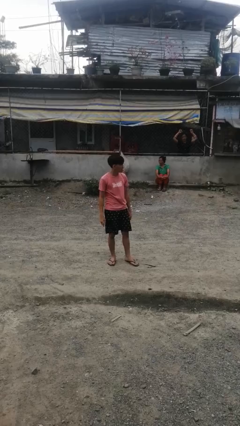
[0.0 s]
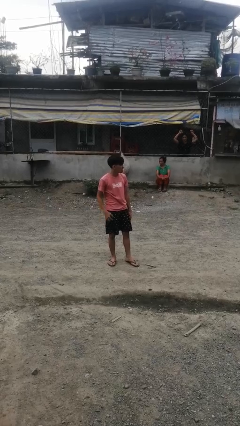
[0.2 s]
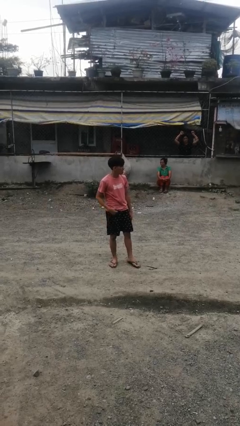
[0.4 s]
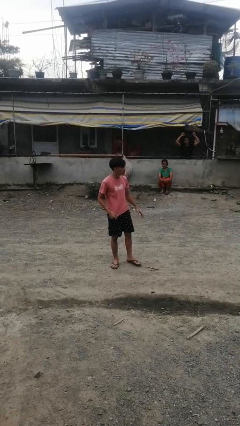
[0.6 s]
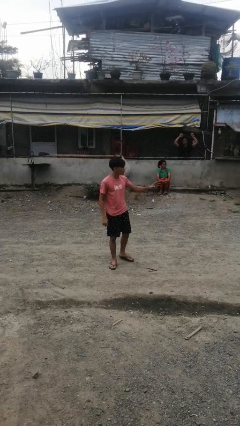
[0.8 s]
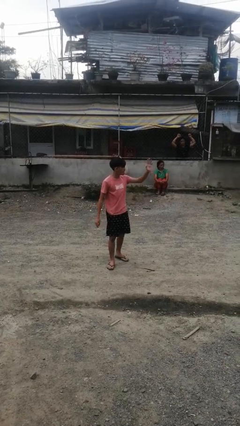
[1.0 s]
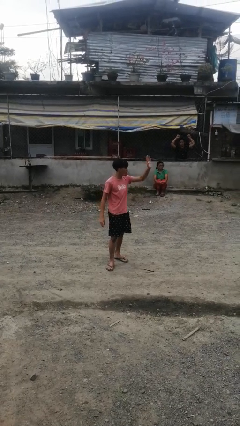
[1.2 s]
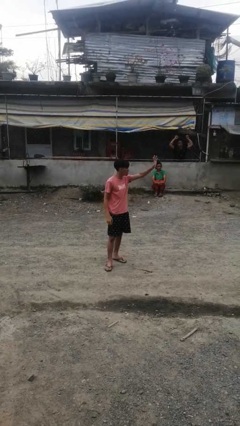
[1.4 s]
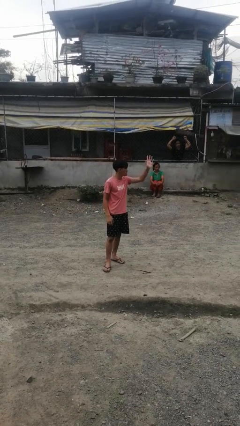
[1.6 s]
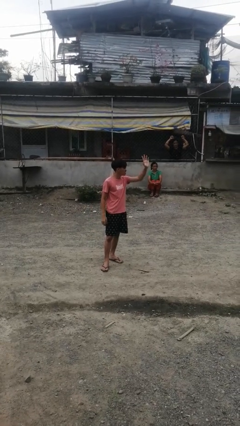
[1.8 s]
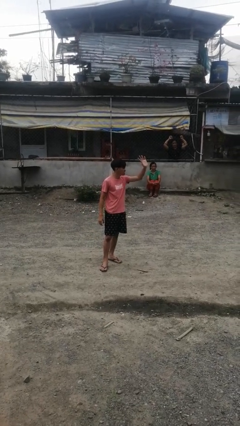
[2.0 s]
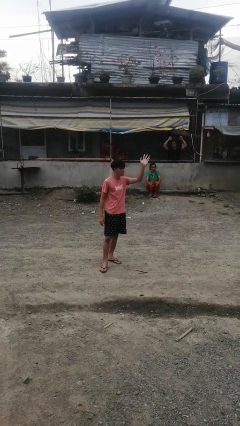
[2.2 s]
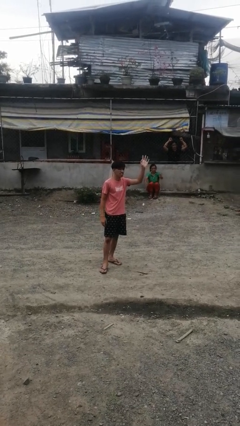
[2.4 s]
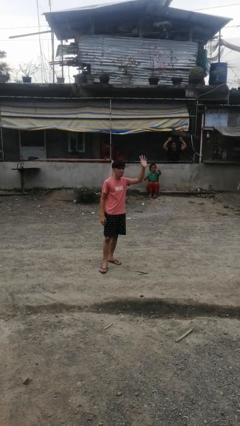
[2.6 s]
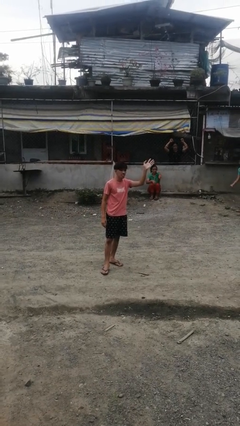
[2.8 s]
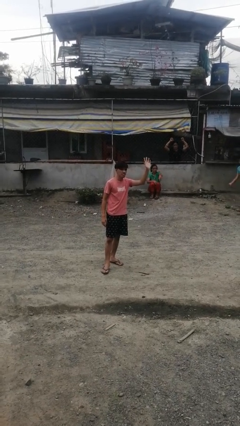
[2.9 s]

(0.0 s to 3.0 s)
person waves at person

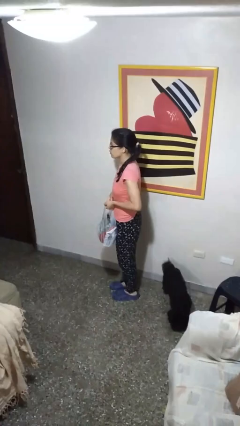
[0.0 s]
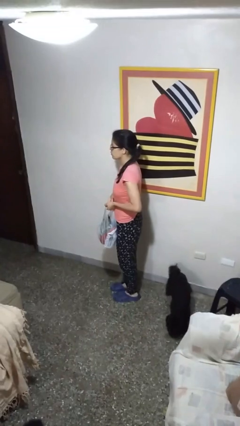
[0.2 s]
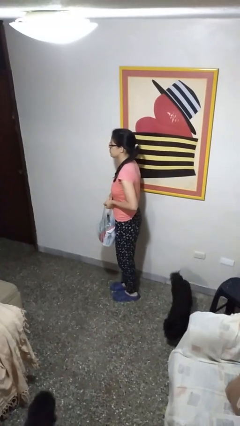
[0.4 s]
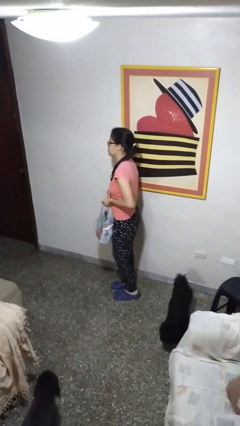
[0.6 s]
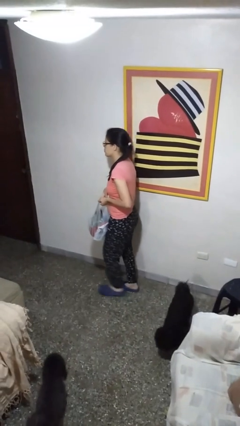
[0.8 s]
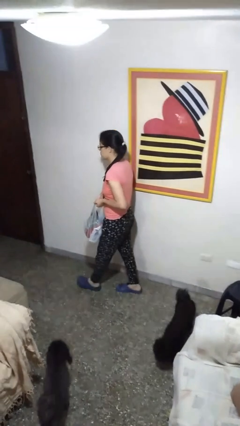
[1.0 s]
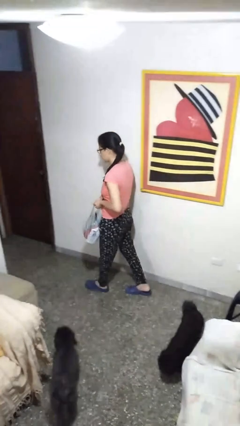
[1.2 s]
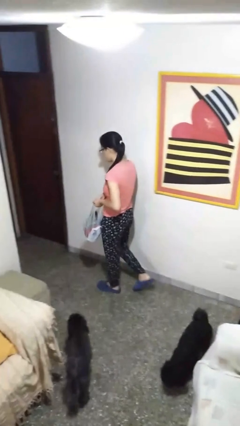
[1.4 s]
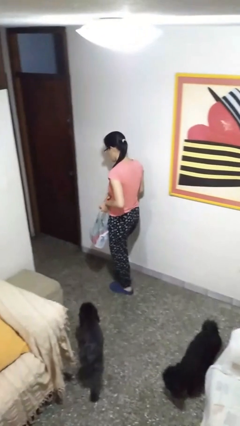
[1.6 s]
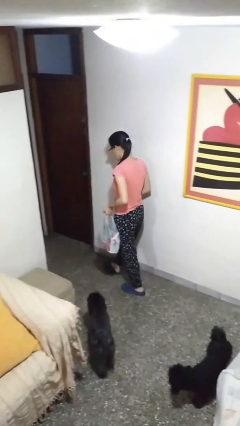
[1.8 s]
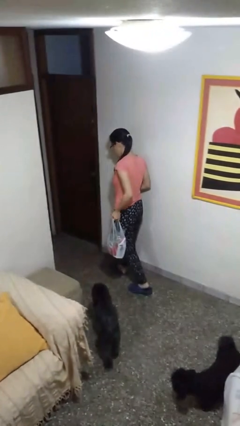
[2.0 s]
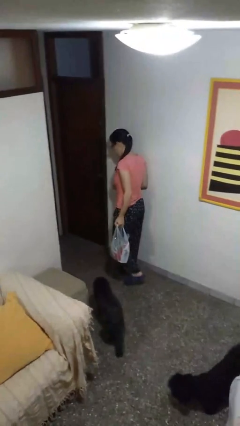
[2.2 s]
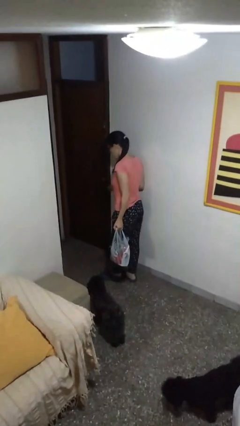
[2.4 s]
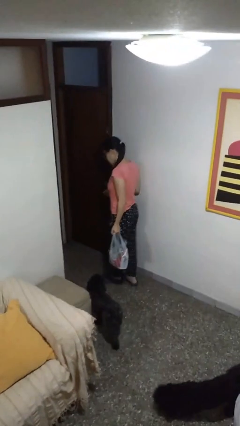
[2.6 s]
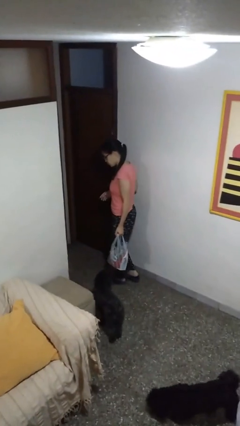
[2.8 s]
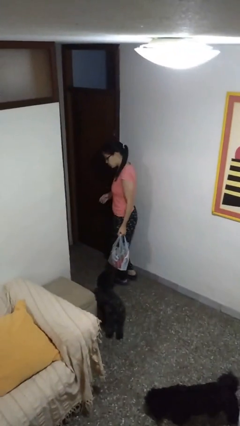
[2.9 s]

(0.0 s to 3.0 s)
person carries groceries

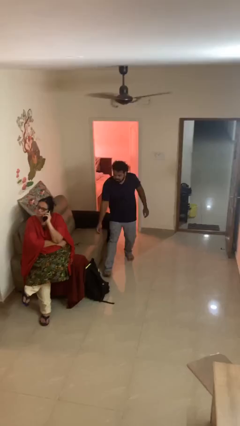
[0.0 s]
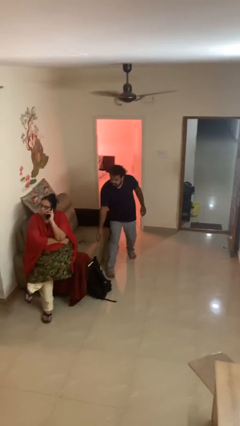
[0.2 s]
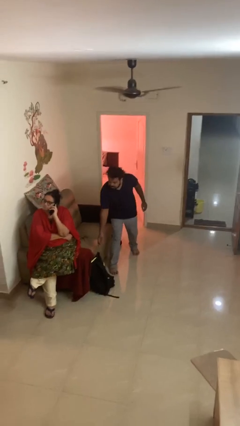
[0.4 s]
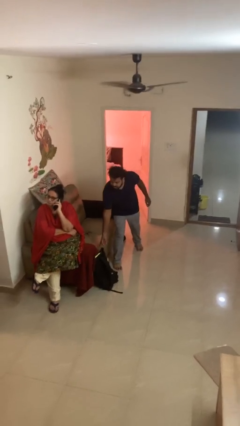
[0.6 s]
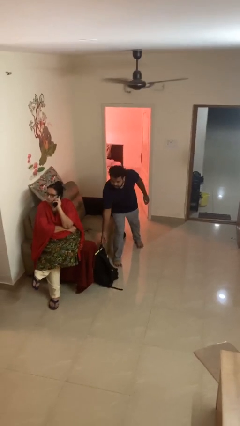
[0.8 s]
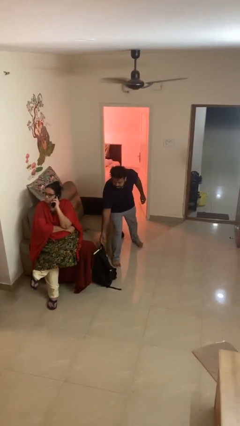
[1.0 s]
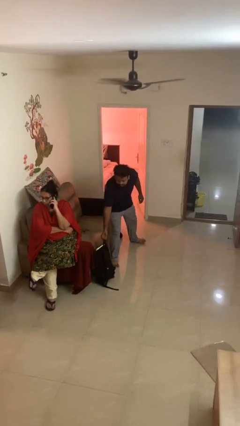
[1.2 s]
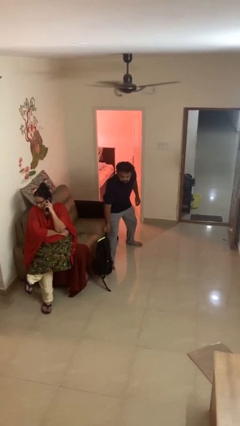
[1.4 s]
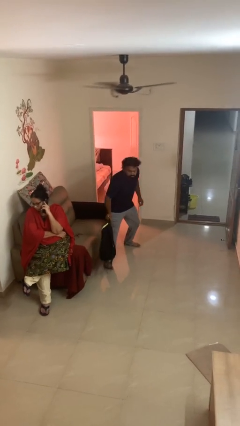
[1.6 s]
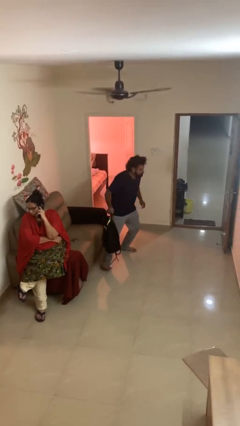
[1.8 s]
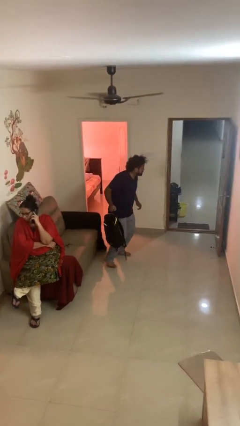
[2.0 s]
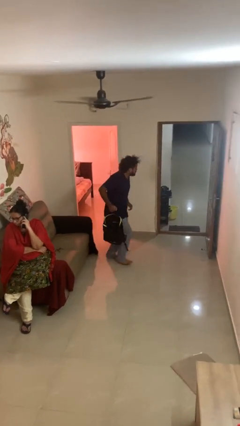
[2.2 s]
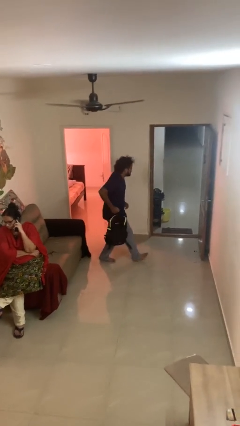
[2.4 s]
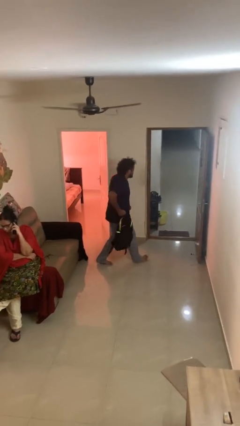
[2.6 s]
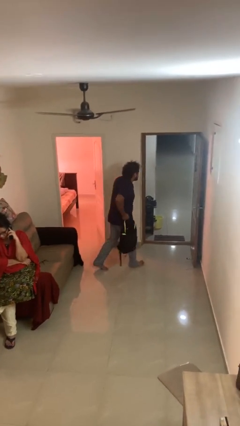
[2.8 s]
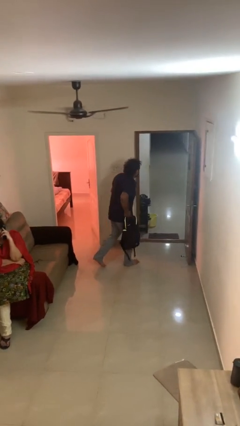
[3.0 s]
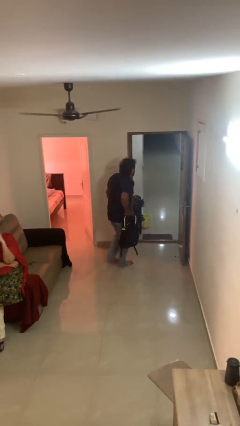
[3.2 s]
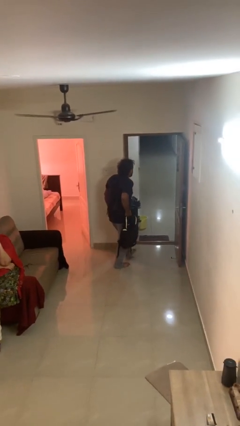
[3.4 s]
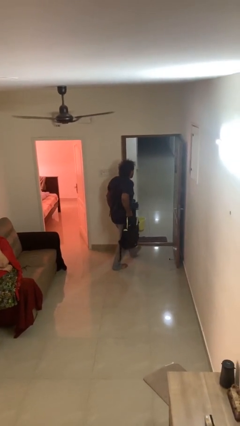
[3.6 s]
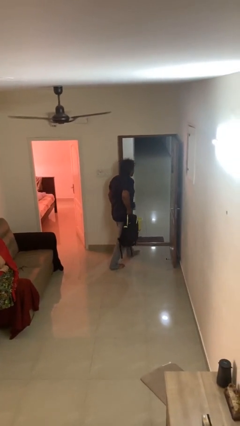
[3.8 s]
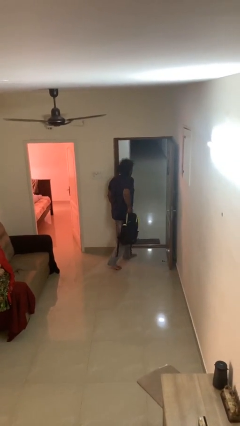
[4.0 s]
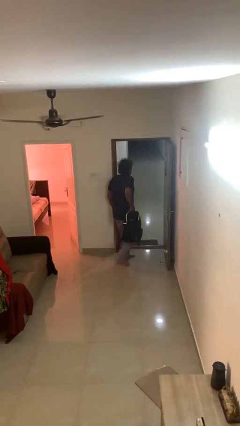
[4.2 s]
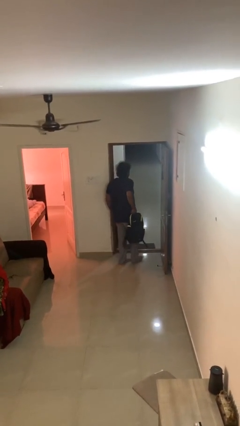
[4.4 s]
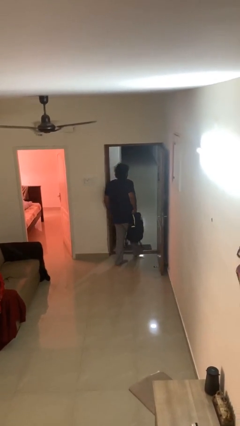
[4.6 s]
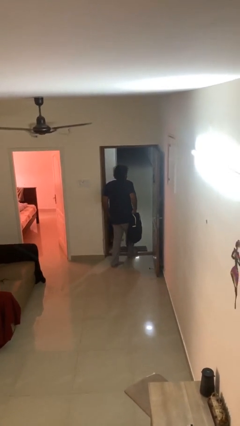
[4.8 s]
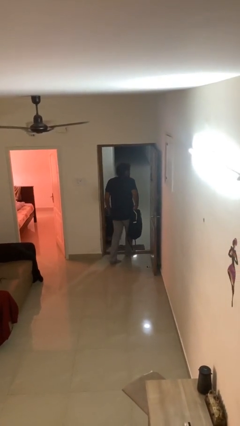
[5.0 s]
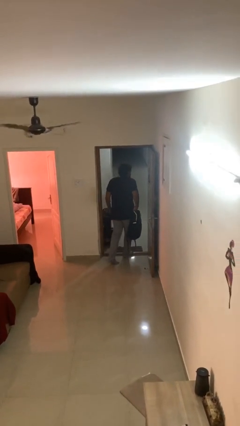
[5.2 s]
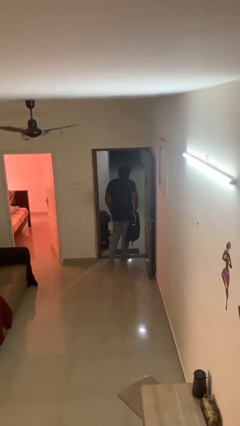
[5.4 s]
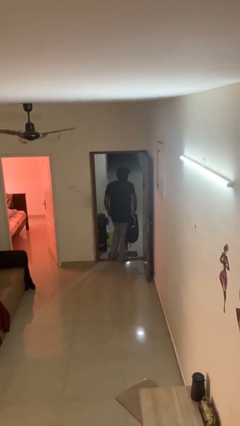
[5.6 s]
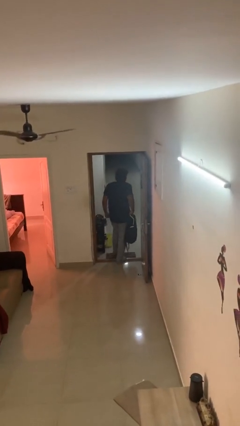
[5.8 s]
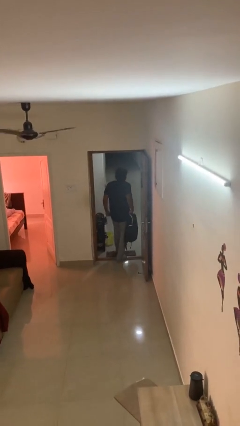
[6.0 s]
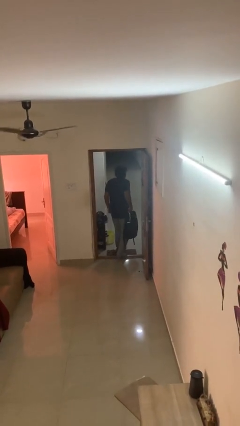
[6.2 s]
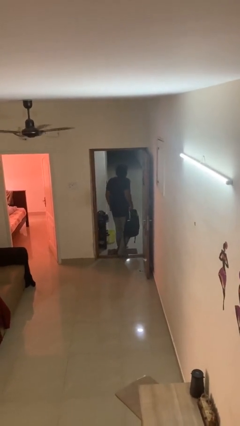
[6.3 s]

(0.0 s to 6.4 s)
person steals object from person

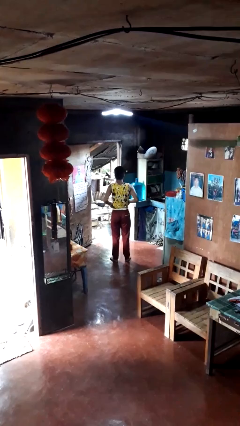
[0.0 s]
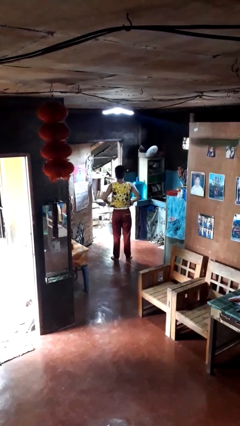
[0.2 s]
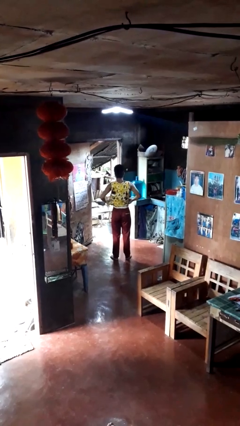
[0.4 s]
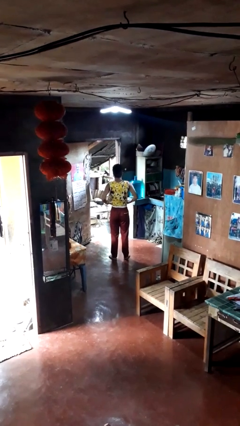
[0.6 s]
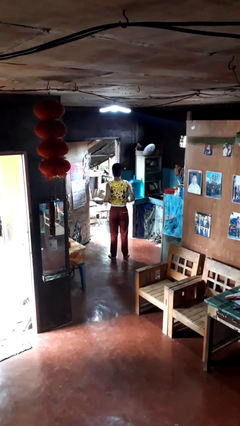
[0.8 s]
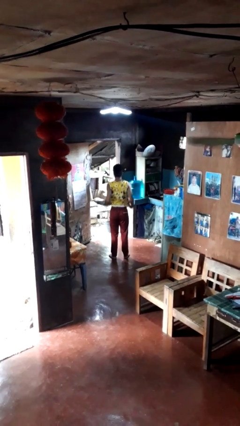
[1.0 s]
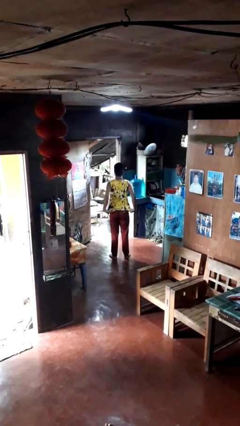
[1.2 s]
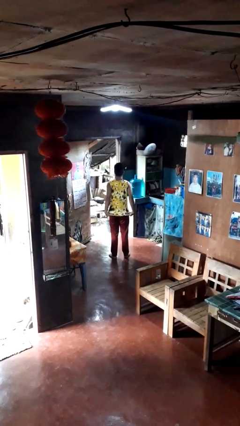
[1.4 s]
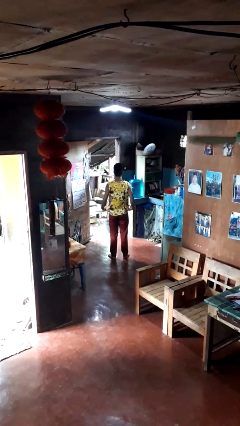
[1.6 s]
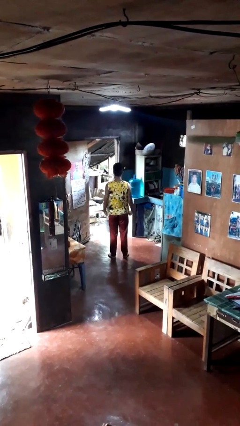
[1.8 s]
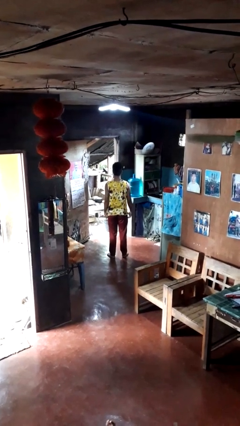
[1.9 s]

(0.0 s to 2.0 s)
person untucks shirt

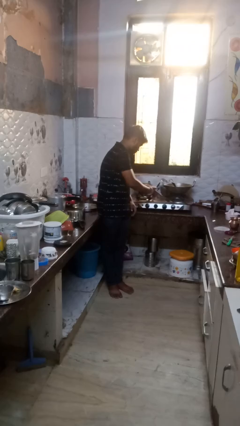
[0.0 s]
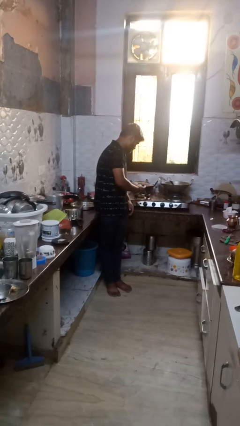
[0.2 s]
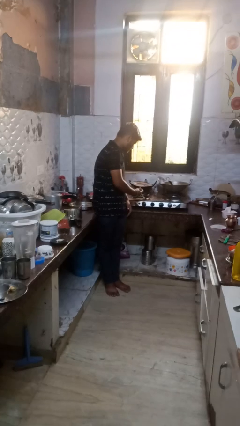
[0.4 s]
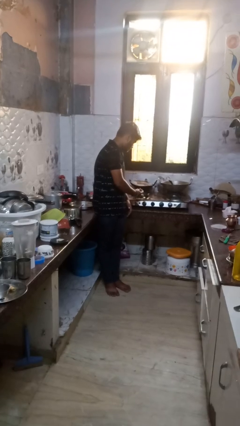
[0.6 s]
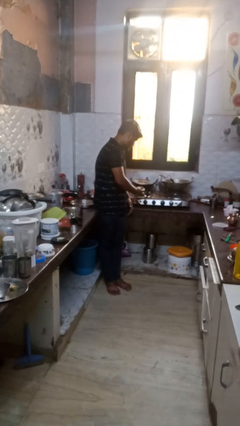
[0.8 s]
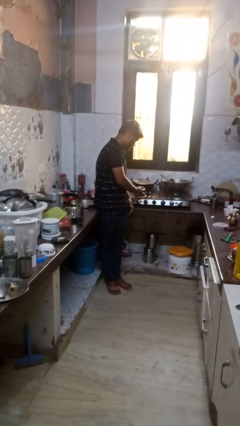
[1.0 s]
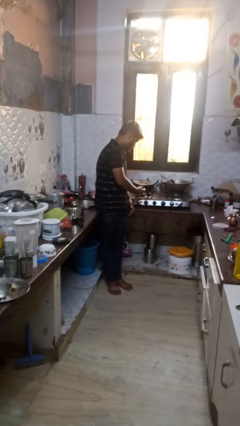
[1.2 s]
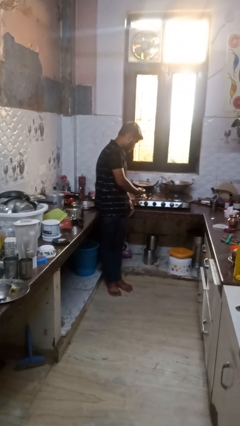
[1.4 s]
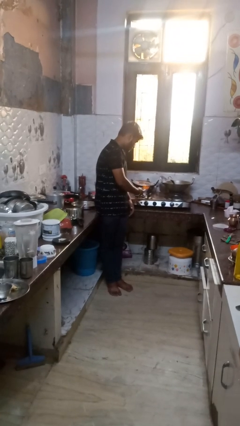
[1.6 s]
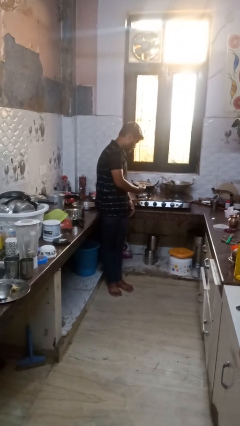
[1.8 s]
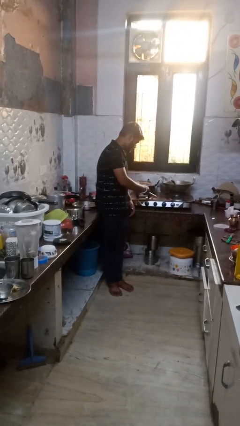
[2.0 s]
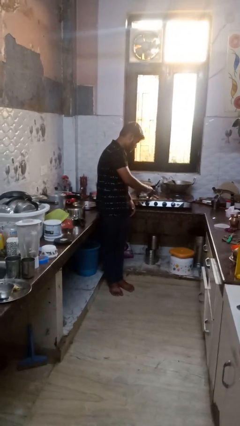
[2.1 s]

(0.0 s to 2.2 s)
person turns on stovetop

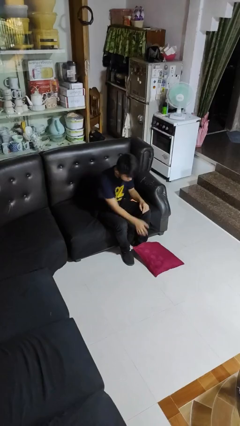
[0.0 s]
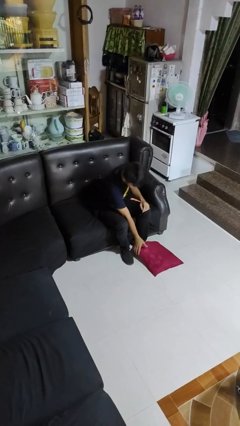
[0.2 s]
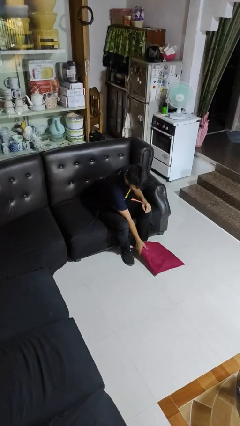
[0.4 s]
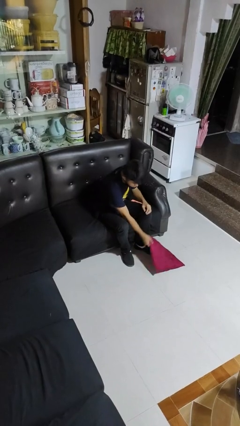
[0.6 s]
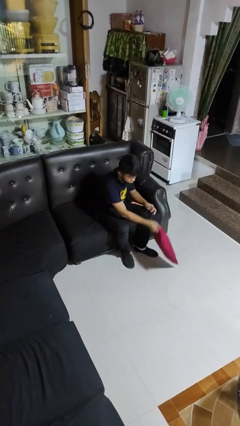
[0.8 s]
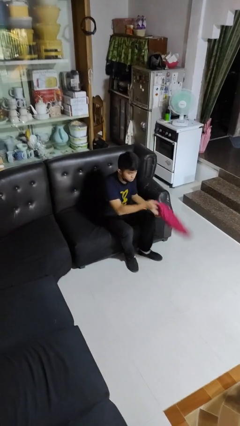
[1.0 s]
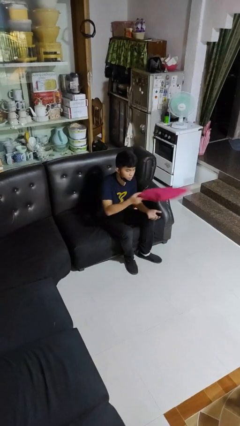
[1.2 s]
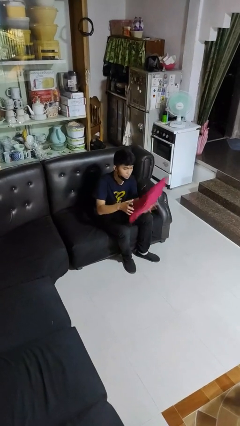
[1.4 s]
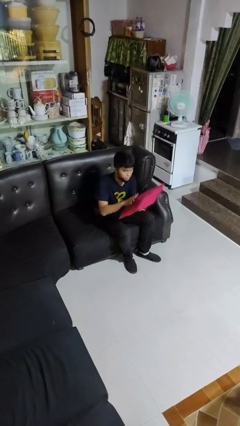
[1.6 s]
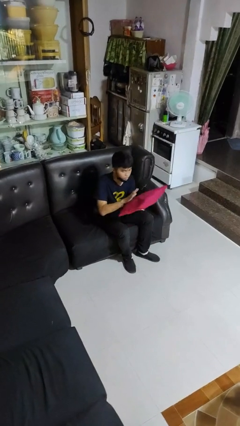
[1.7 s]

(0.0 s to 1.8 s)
person picks up object from floor
